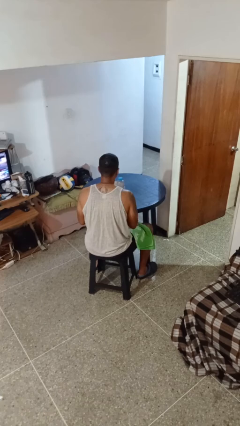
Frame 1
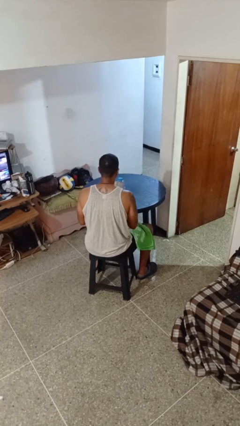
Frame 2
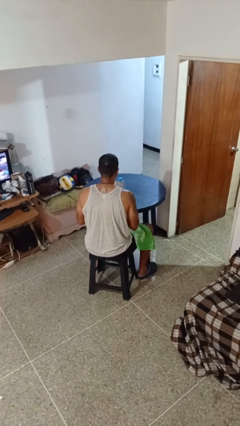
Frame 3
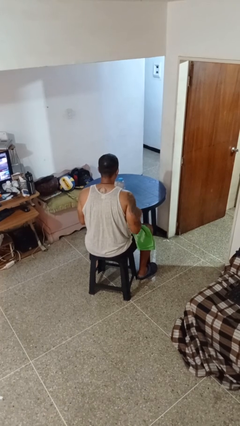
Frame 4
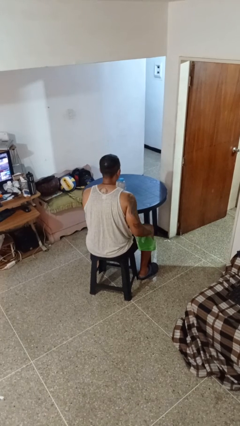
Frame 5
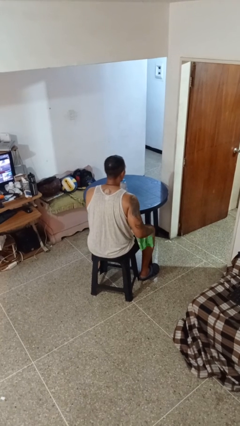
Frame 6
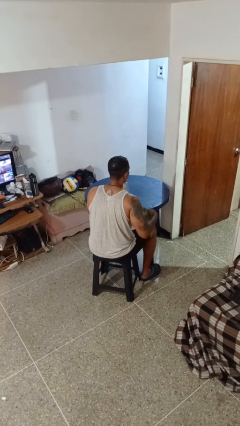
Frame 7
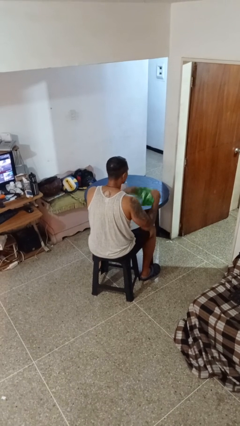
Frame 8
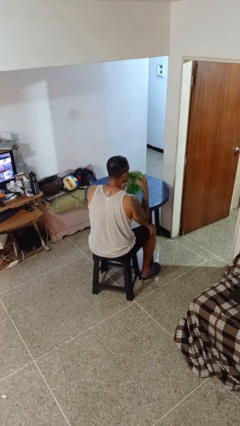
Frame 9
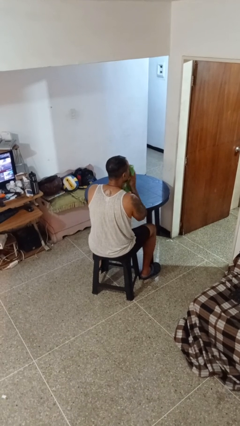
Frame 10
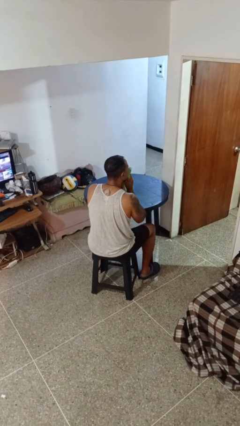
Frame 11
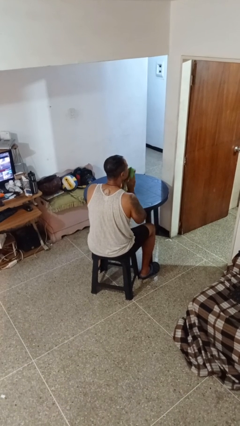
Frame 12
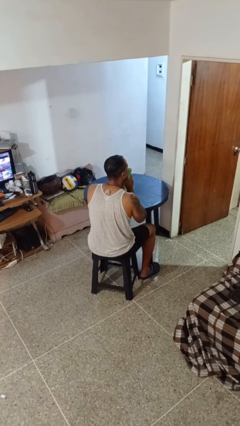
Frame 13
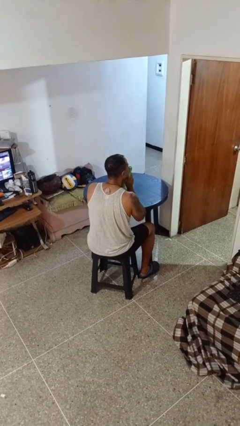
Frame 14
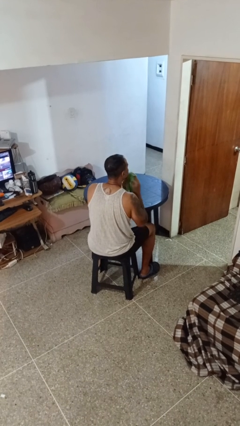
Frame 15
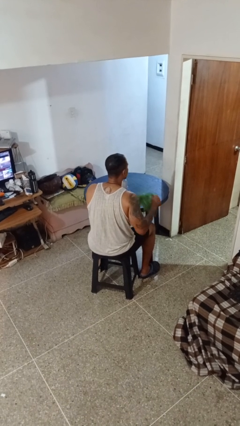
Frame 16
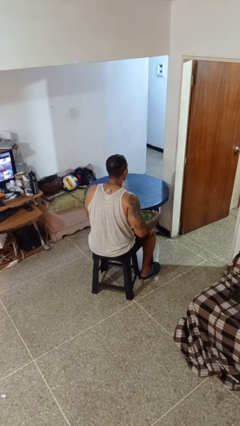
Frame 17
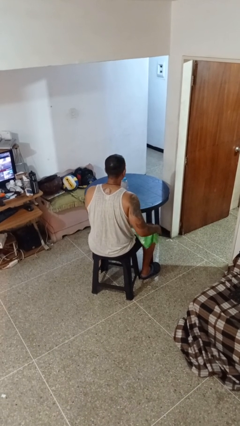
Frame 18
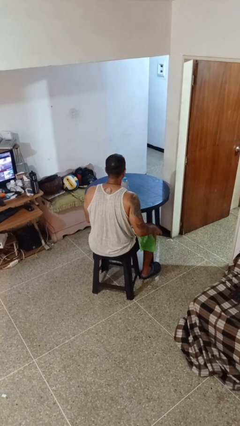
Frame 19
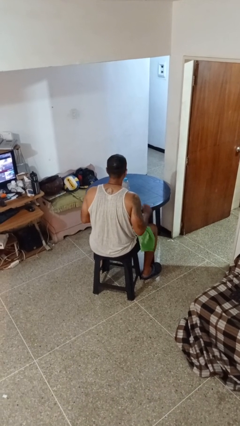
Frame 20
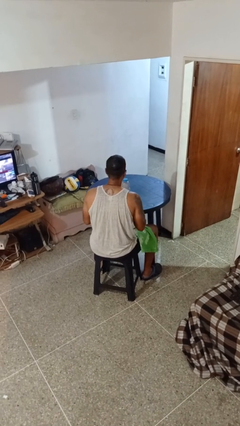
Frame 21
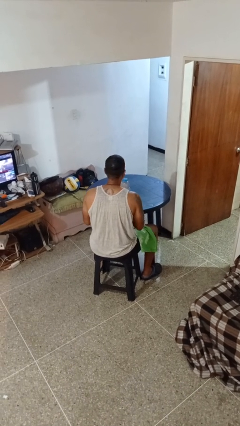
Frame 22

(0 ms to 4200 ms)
person wipes mouth with napkin

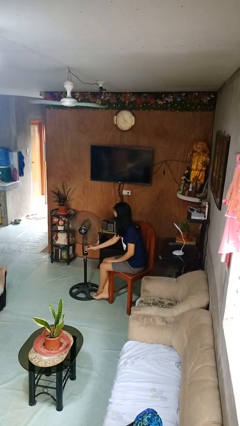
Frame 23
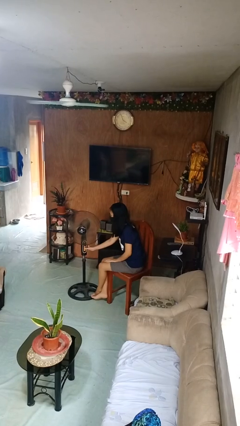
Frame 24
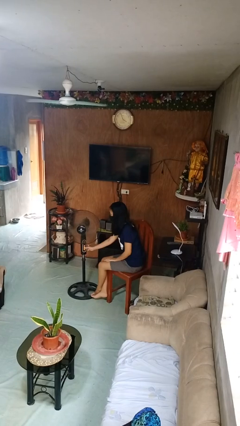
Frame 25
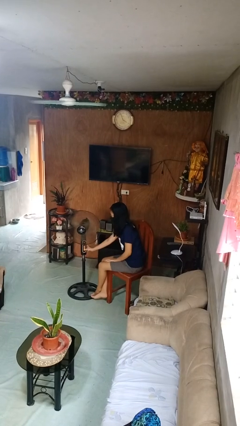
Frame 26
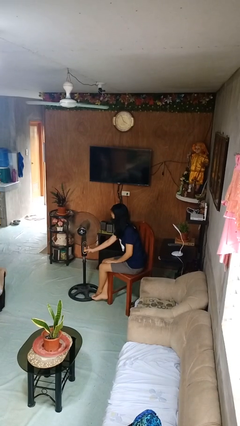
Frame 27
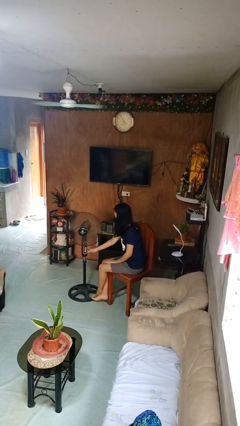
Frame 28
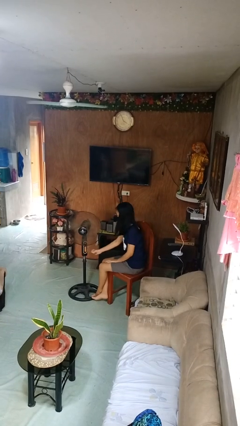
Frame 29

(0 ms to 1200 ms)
person turns on fan

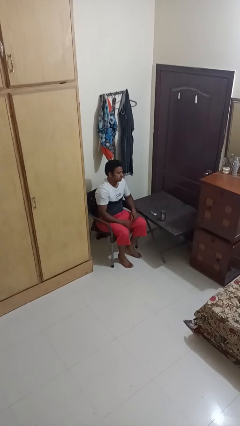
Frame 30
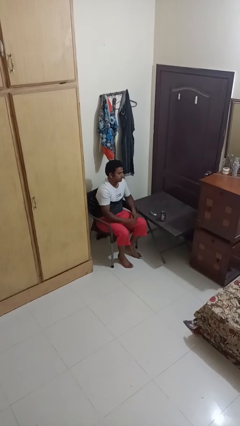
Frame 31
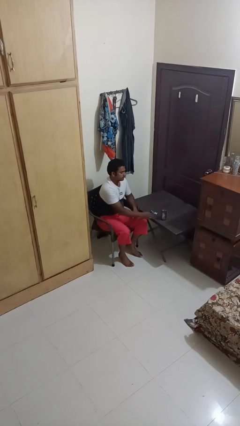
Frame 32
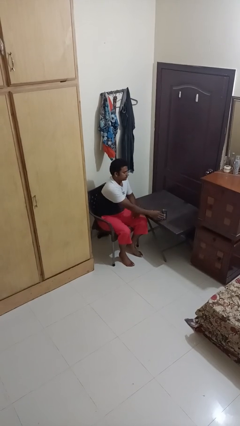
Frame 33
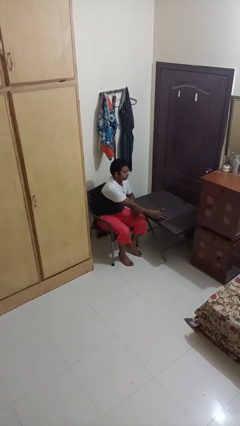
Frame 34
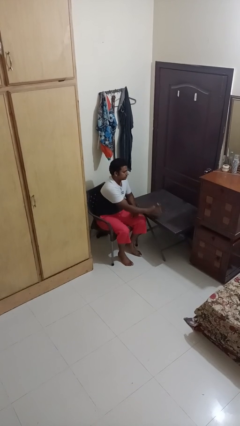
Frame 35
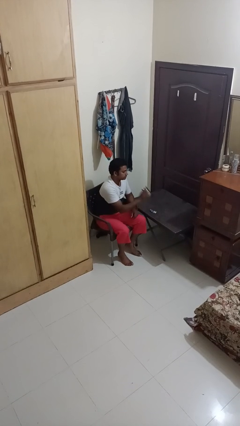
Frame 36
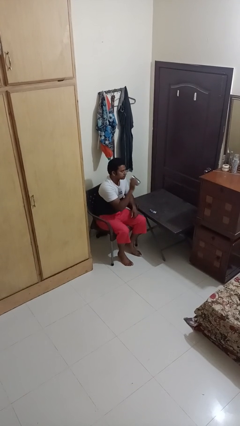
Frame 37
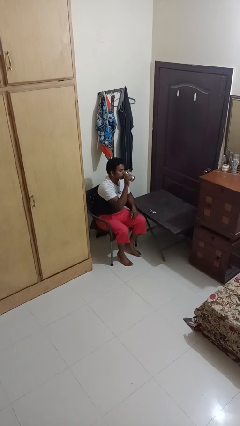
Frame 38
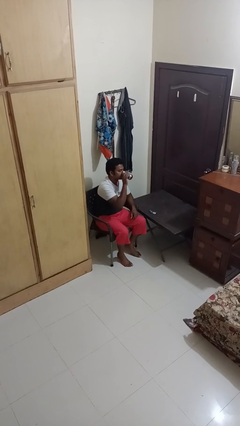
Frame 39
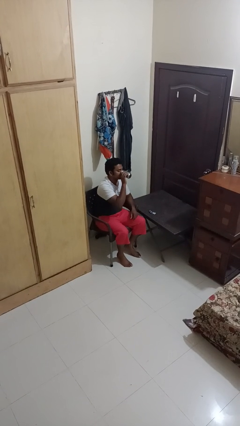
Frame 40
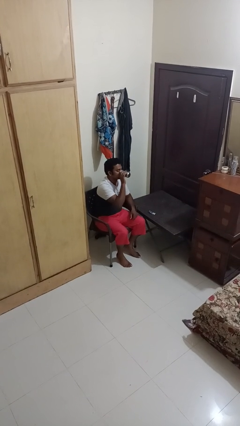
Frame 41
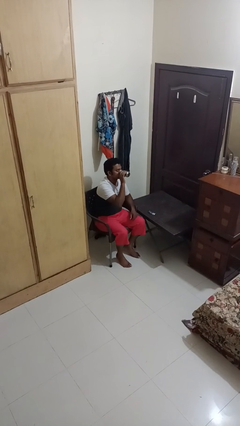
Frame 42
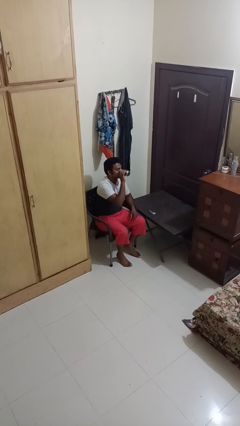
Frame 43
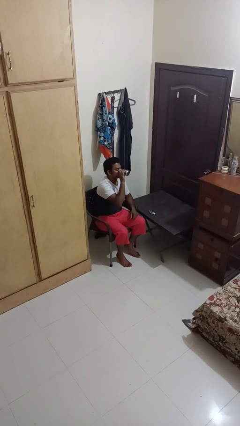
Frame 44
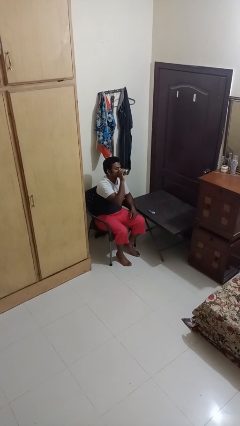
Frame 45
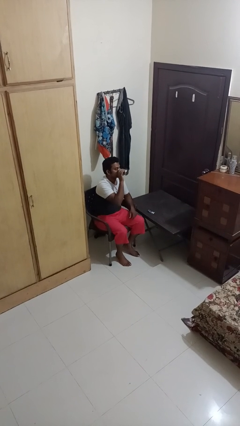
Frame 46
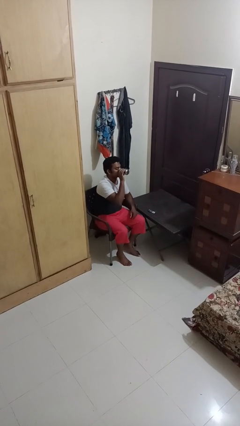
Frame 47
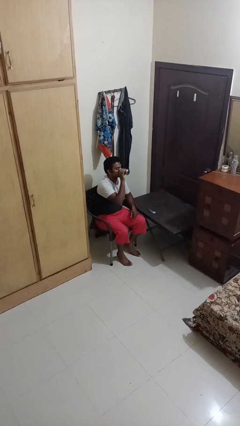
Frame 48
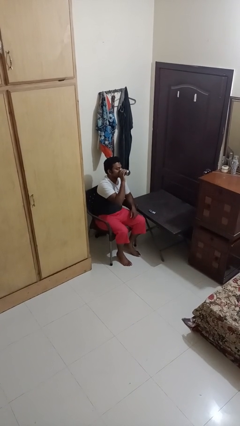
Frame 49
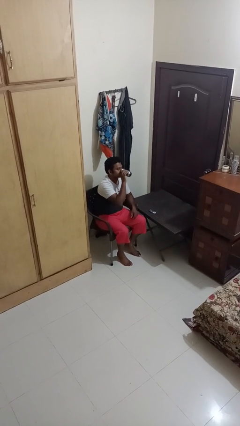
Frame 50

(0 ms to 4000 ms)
person drinks from cup

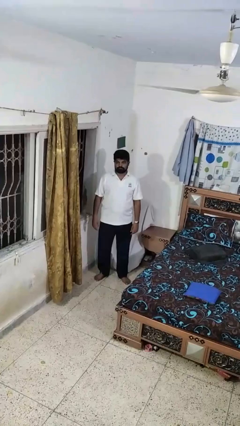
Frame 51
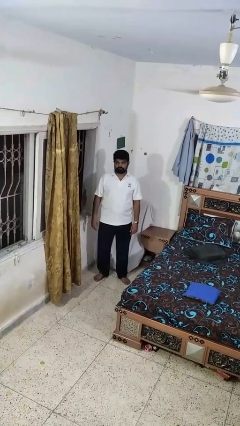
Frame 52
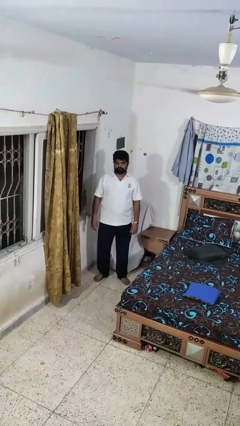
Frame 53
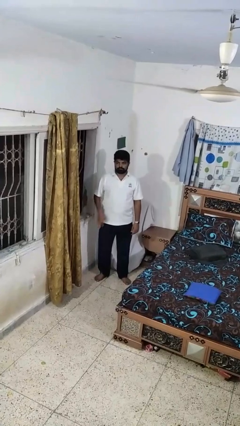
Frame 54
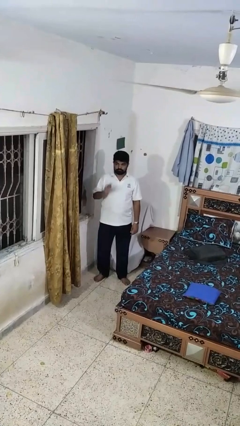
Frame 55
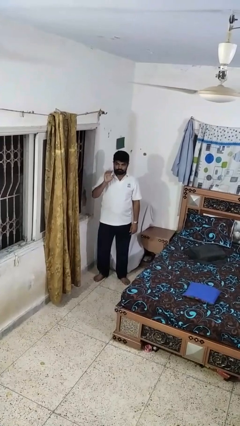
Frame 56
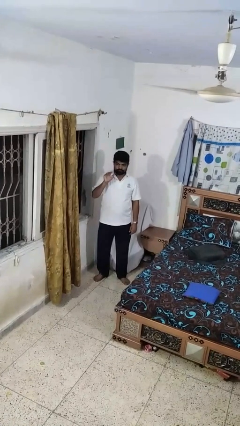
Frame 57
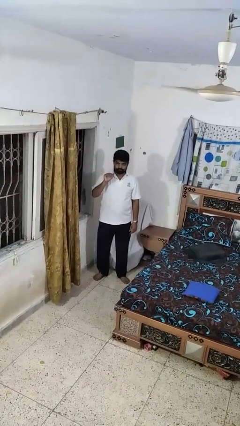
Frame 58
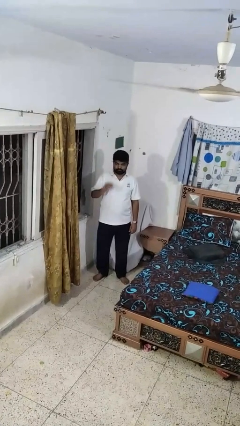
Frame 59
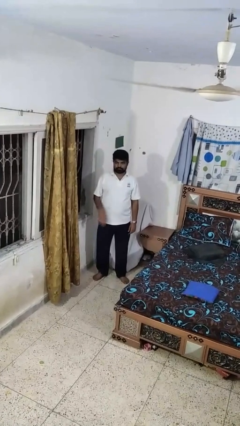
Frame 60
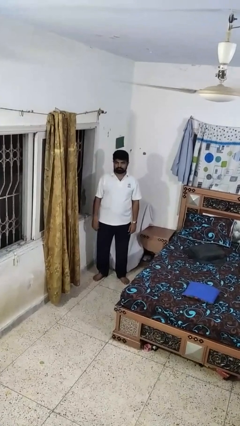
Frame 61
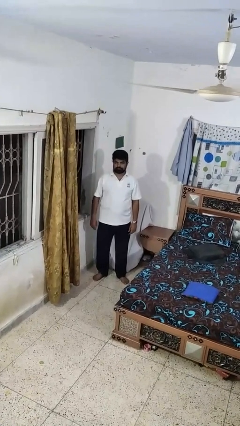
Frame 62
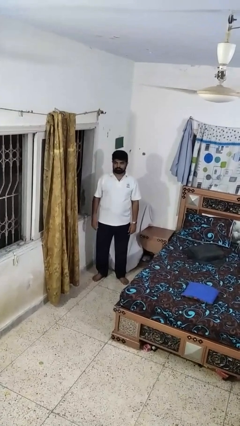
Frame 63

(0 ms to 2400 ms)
person waves at person

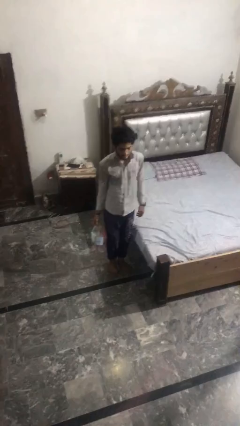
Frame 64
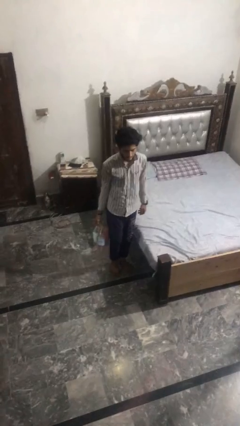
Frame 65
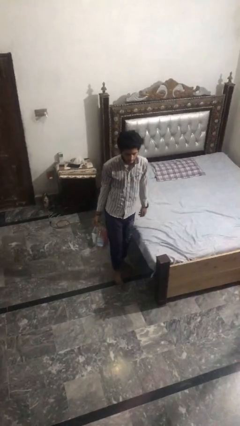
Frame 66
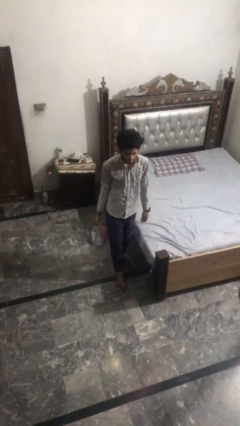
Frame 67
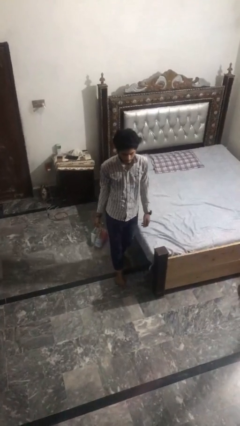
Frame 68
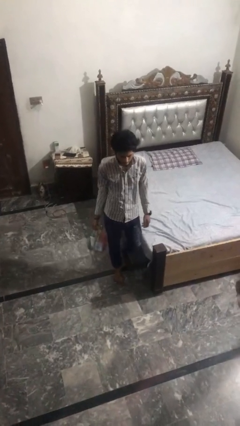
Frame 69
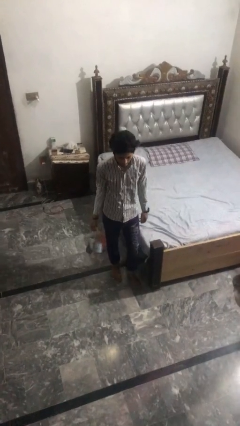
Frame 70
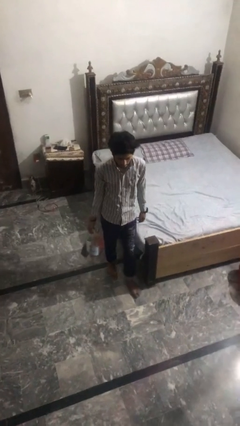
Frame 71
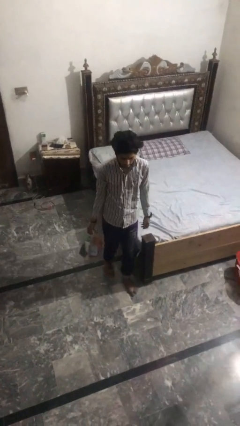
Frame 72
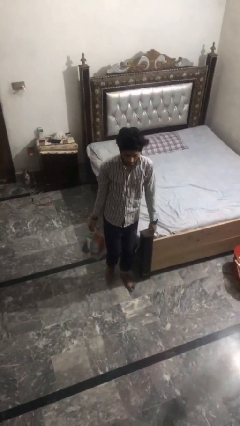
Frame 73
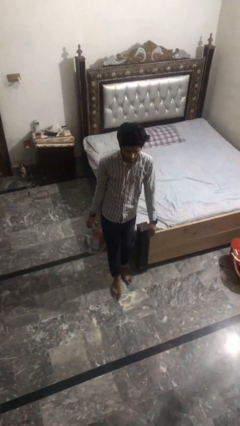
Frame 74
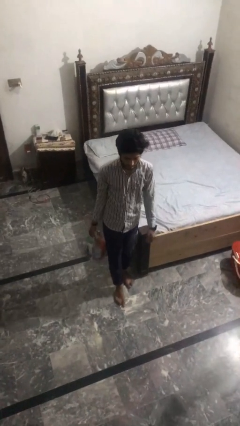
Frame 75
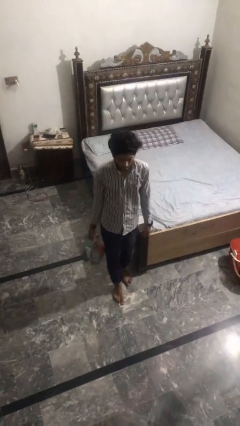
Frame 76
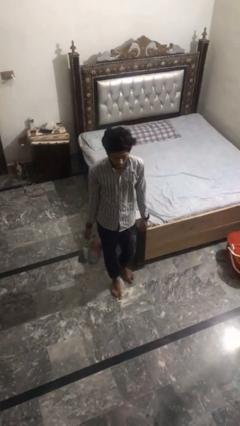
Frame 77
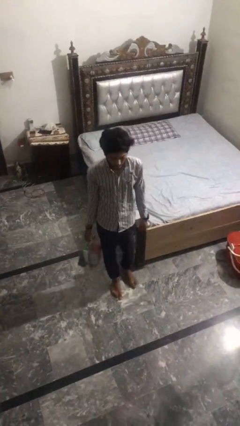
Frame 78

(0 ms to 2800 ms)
person carries groceries

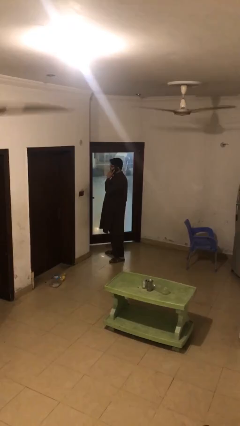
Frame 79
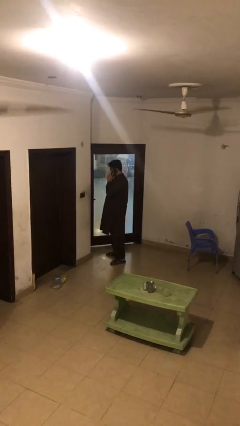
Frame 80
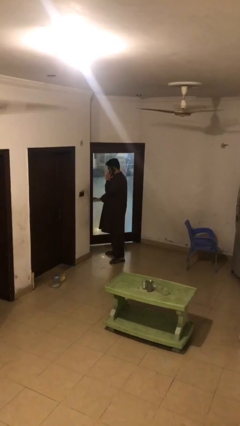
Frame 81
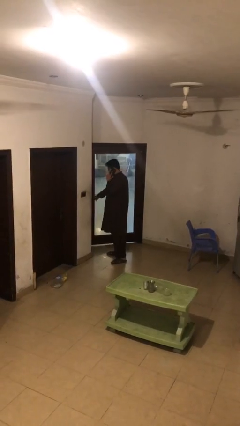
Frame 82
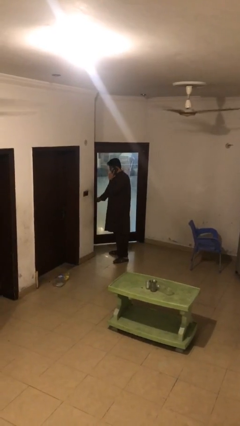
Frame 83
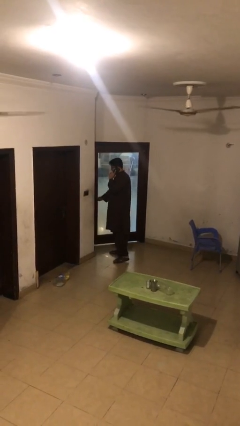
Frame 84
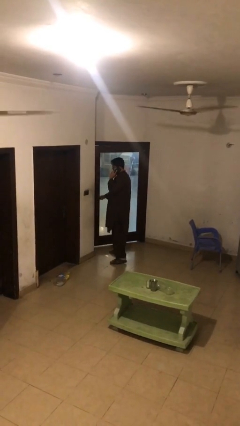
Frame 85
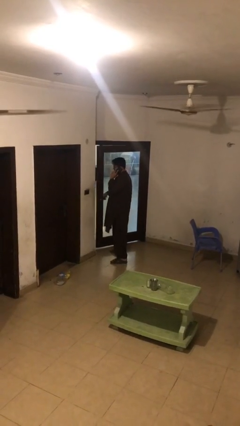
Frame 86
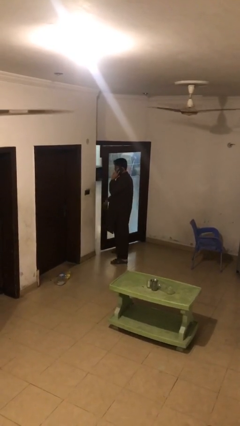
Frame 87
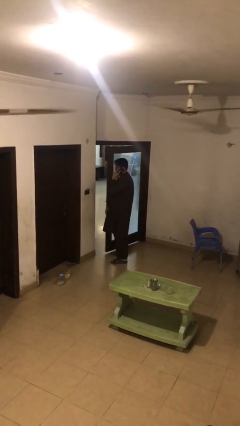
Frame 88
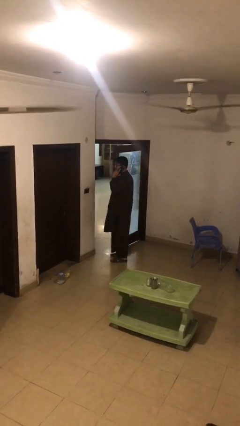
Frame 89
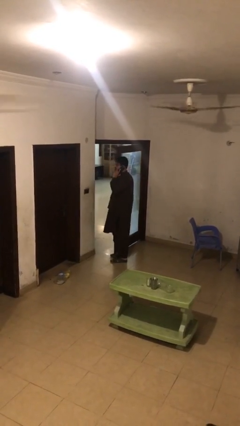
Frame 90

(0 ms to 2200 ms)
person opens facility door
